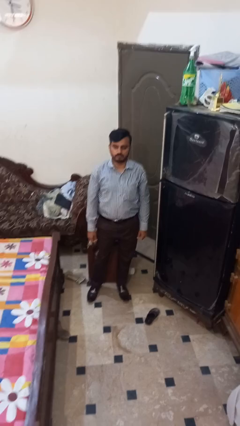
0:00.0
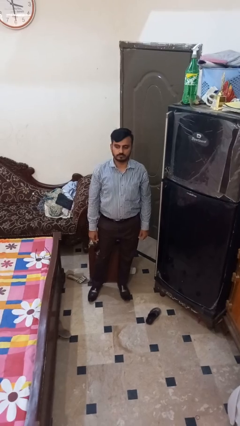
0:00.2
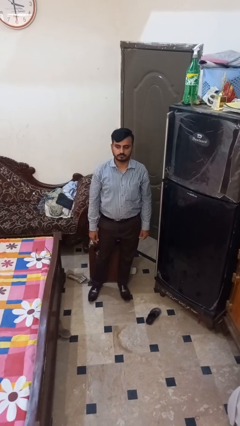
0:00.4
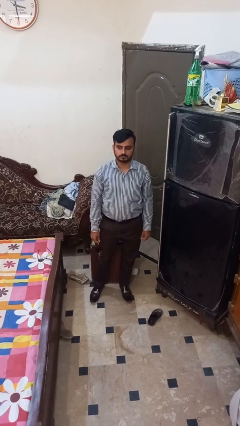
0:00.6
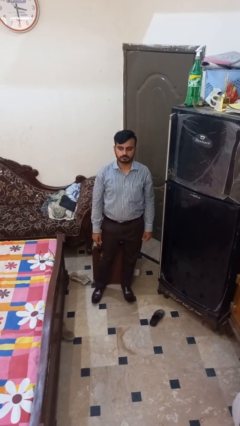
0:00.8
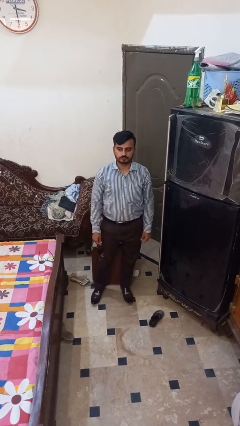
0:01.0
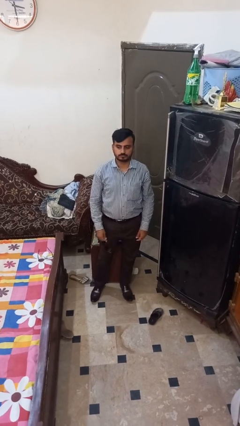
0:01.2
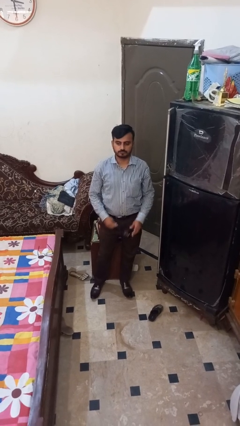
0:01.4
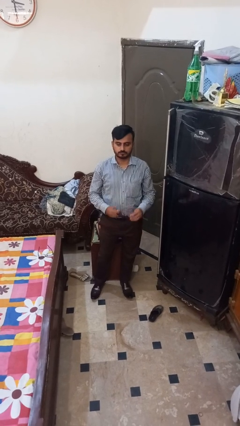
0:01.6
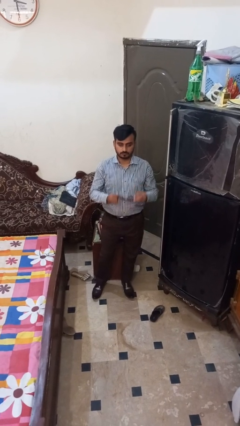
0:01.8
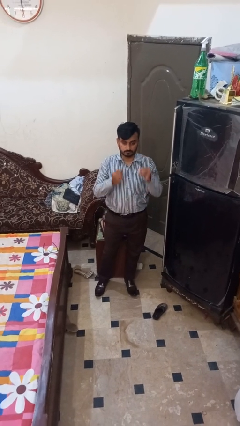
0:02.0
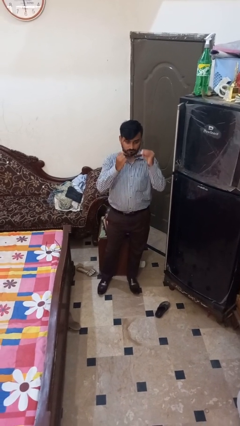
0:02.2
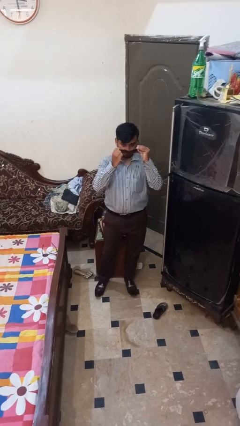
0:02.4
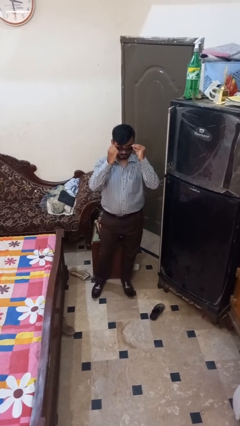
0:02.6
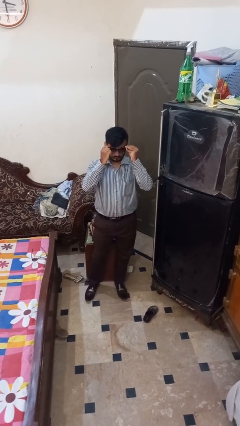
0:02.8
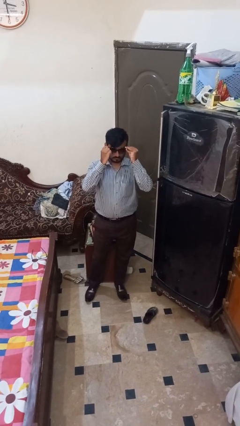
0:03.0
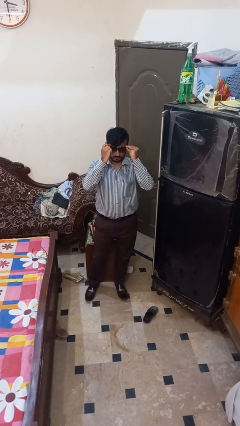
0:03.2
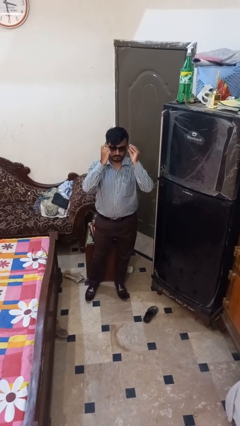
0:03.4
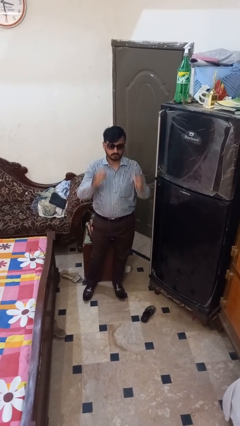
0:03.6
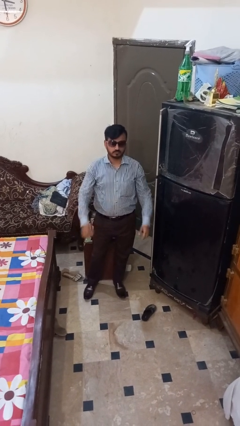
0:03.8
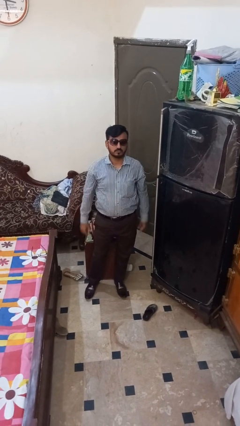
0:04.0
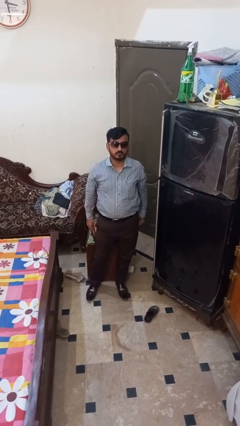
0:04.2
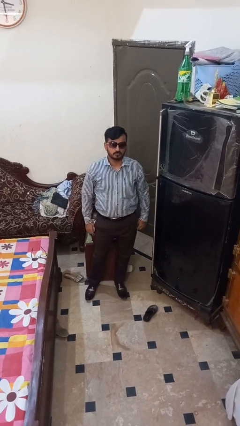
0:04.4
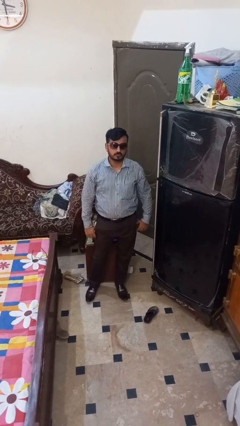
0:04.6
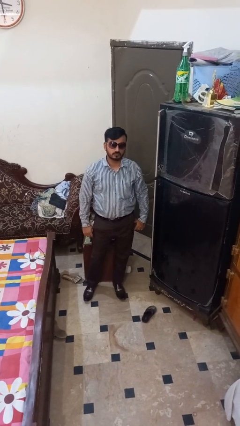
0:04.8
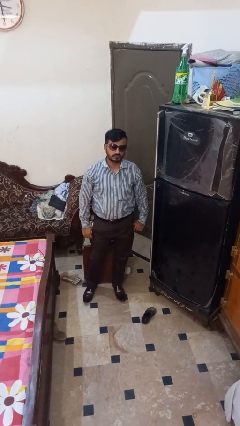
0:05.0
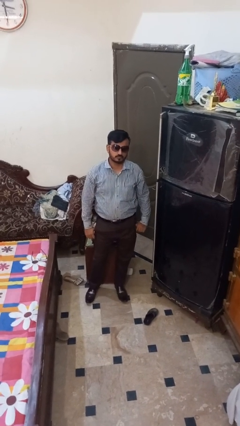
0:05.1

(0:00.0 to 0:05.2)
person puts on sunglasses

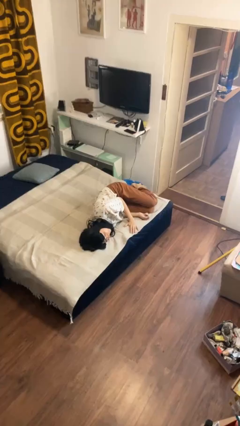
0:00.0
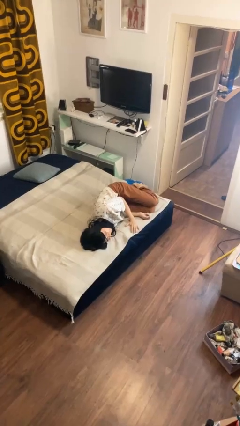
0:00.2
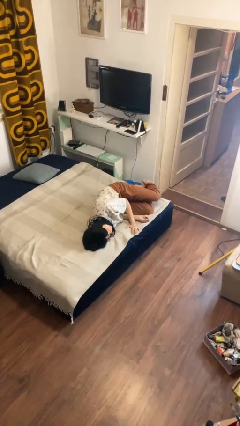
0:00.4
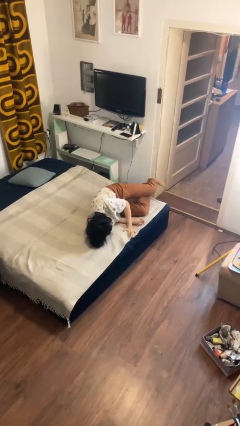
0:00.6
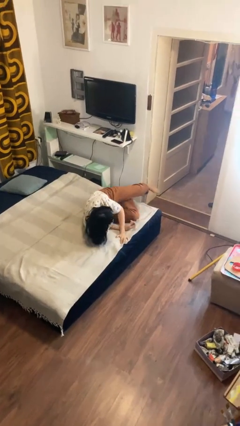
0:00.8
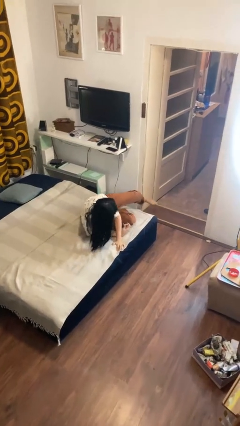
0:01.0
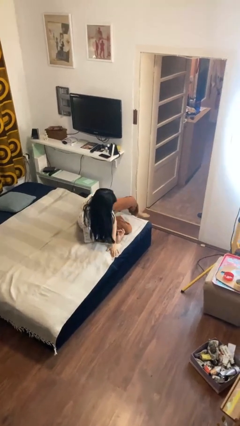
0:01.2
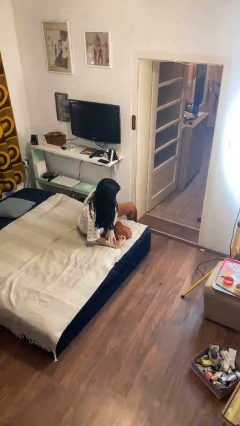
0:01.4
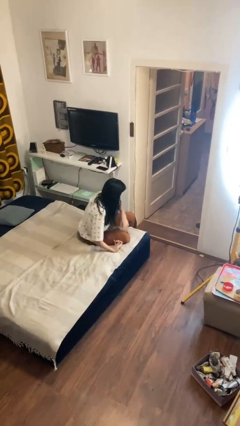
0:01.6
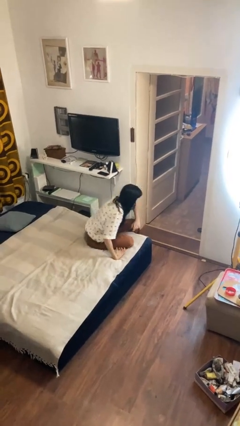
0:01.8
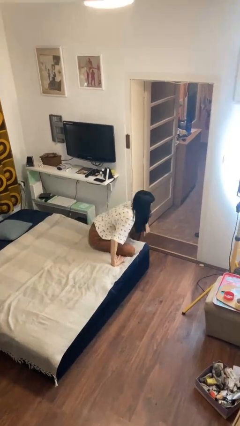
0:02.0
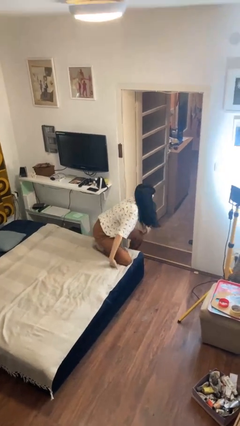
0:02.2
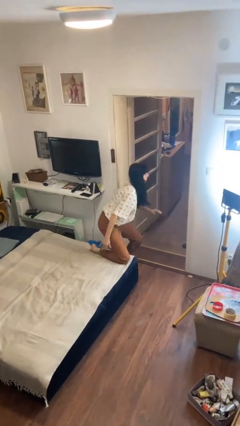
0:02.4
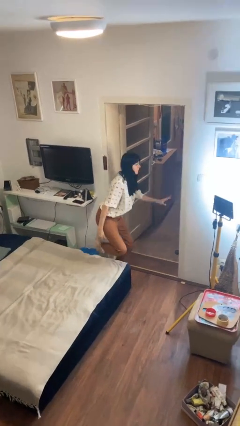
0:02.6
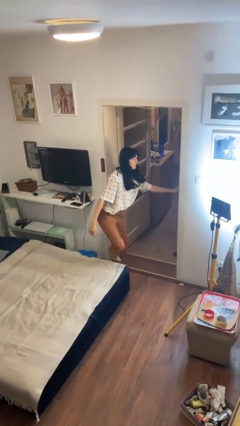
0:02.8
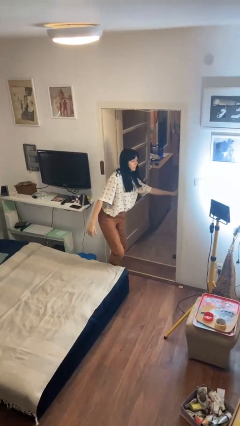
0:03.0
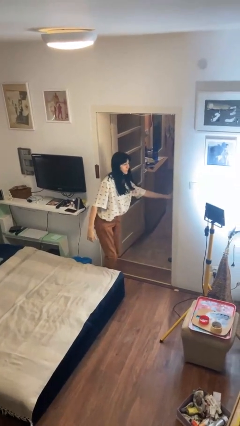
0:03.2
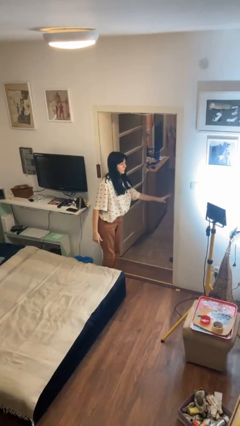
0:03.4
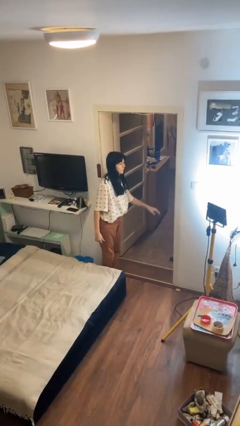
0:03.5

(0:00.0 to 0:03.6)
person stands up

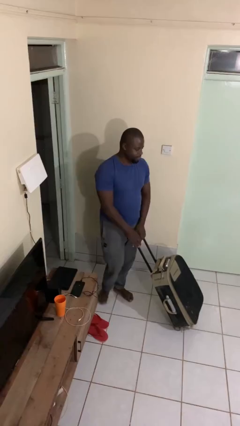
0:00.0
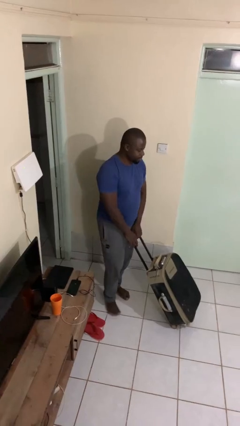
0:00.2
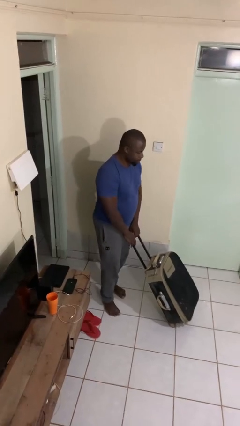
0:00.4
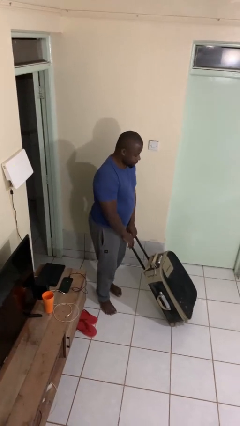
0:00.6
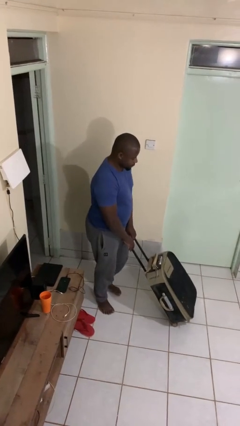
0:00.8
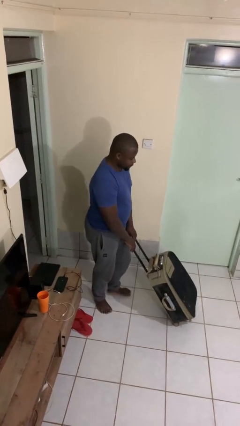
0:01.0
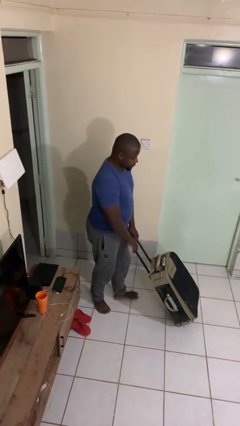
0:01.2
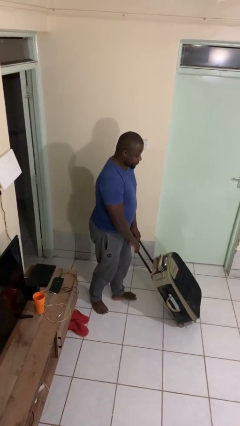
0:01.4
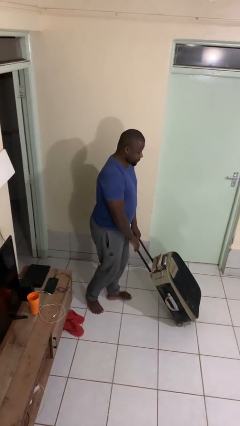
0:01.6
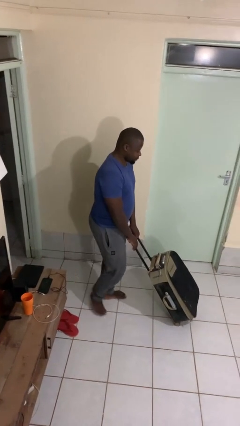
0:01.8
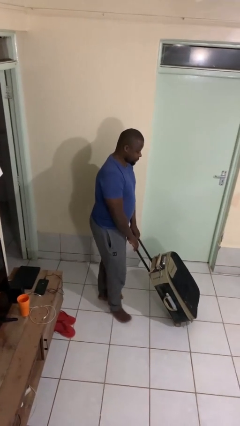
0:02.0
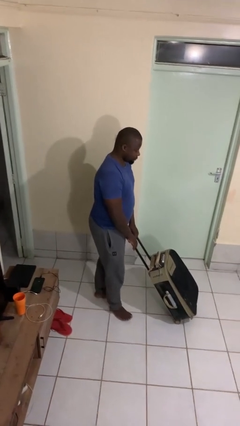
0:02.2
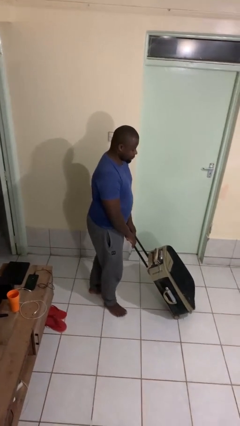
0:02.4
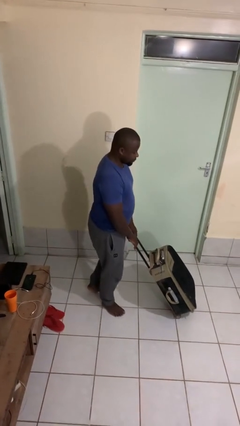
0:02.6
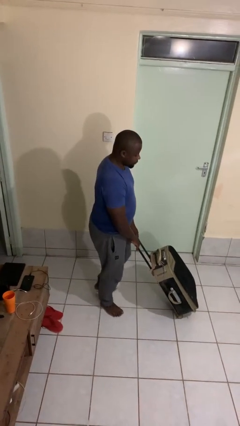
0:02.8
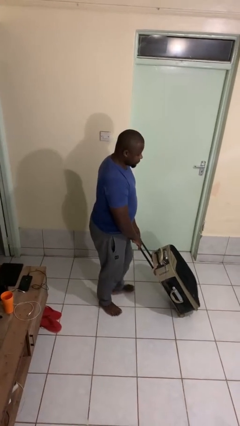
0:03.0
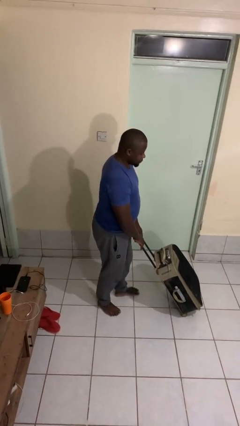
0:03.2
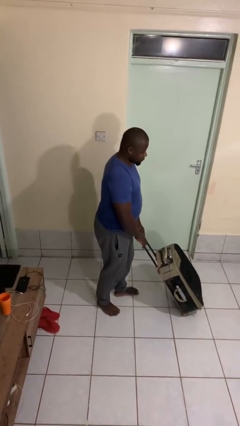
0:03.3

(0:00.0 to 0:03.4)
person pushes wheeled cart

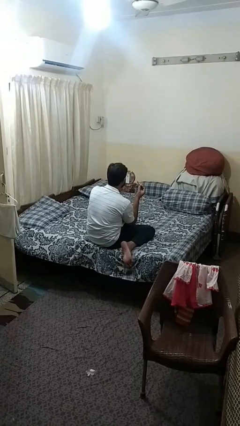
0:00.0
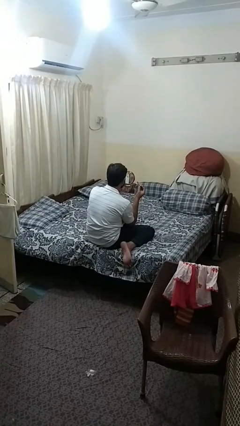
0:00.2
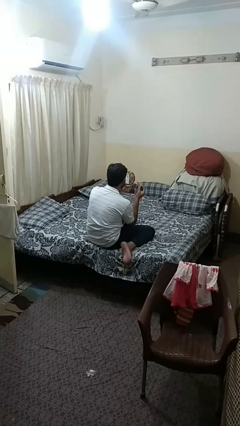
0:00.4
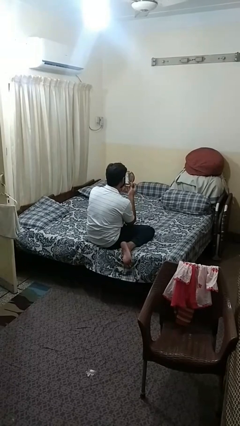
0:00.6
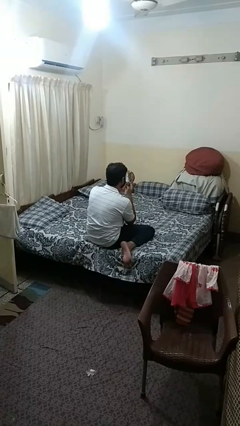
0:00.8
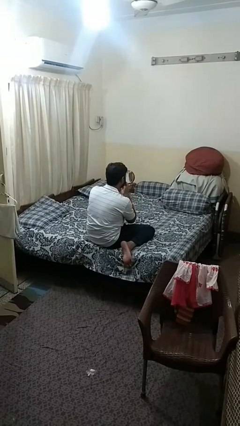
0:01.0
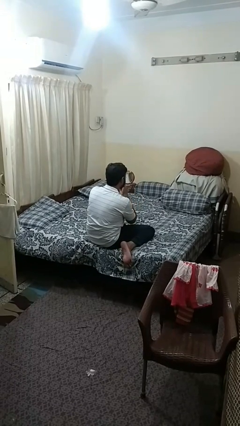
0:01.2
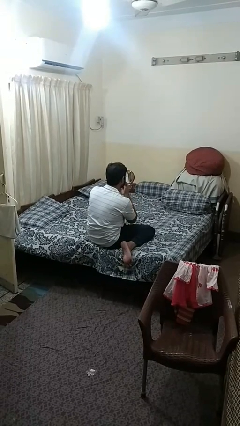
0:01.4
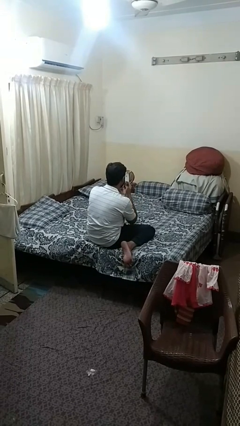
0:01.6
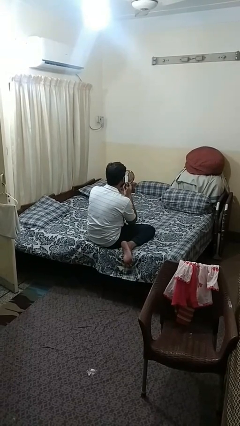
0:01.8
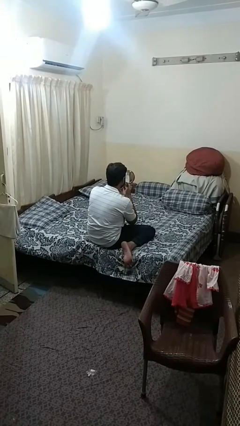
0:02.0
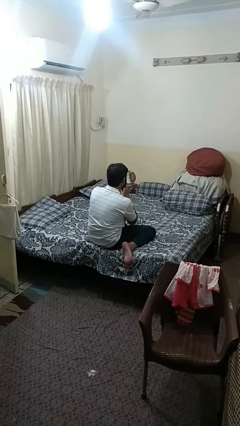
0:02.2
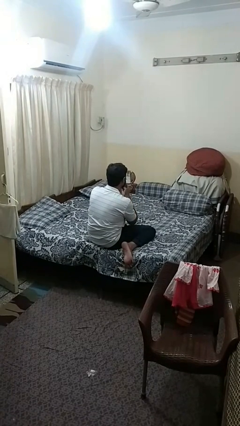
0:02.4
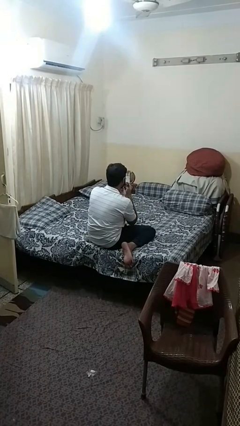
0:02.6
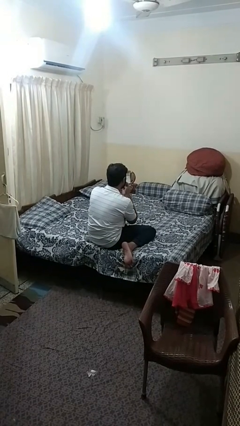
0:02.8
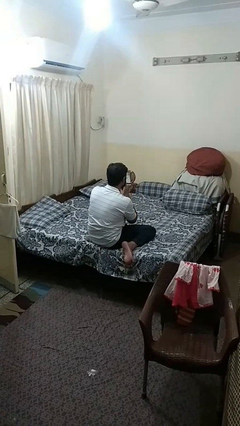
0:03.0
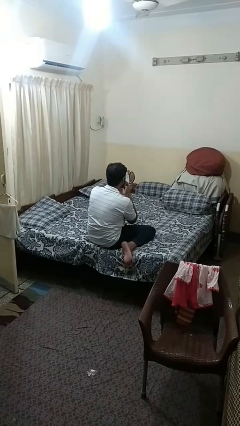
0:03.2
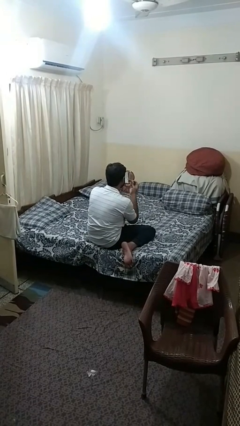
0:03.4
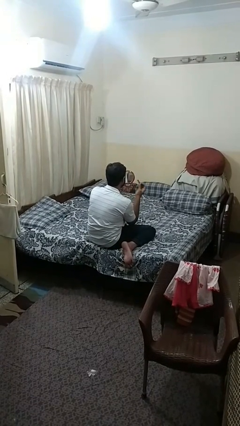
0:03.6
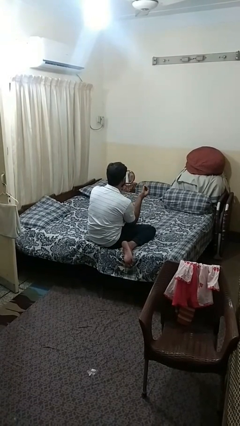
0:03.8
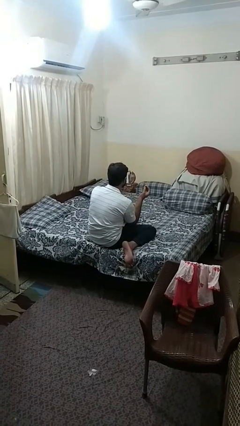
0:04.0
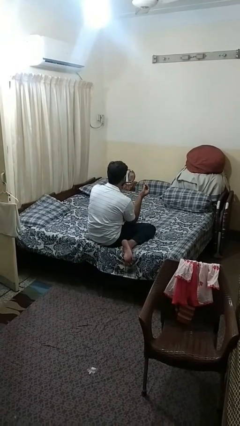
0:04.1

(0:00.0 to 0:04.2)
person applies lip makeup

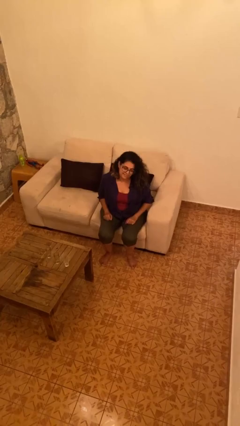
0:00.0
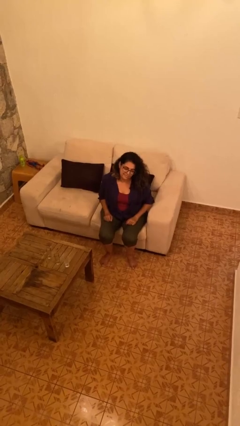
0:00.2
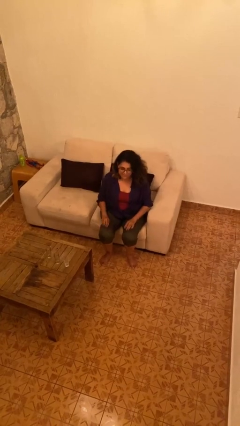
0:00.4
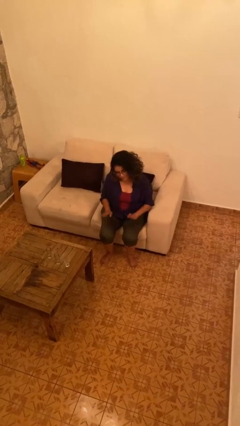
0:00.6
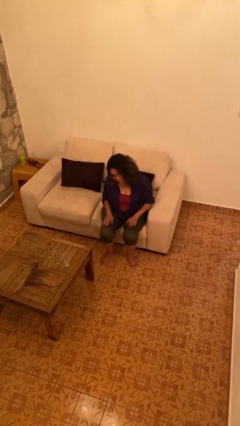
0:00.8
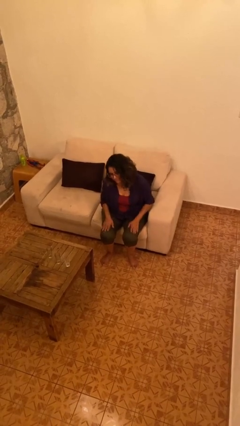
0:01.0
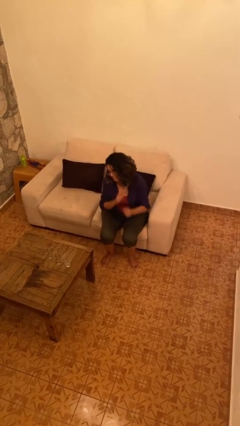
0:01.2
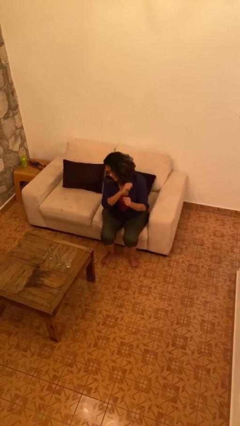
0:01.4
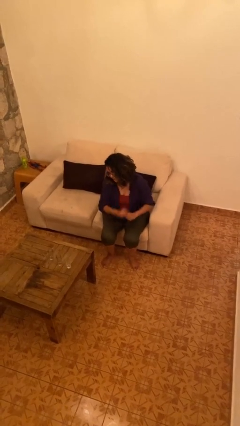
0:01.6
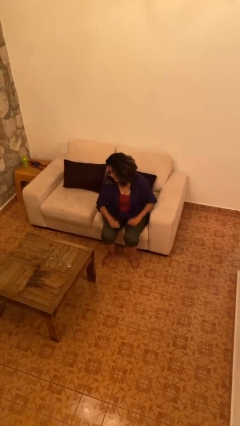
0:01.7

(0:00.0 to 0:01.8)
person slaps hands on thighs
